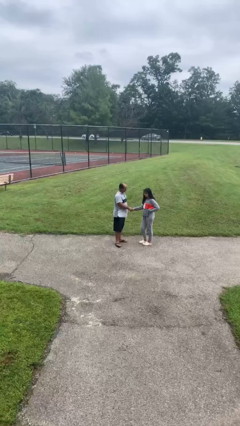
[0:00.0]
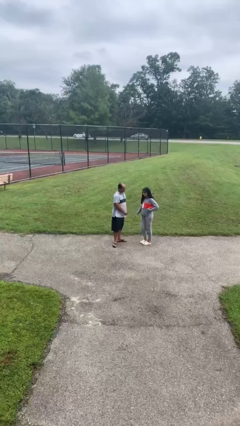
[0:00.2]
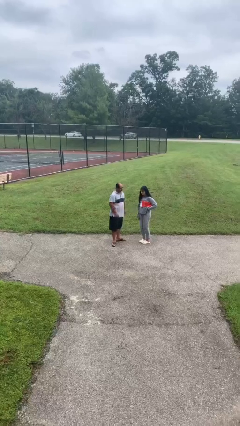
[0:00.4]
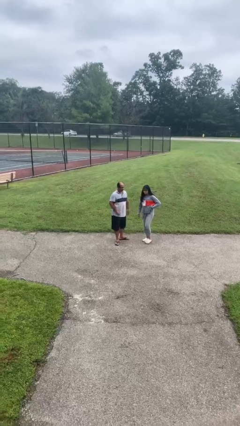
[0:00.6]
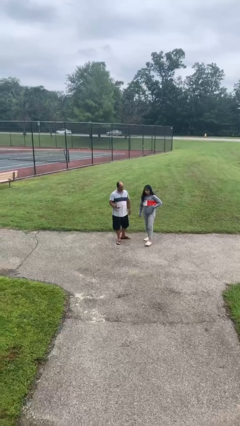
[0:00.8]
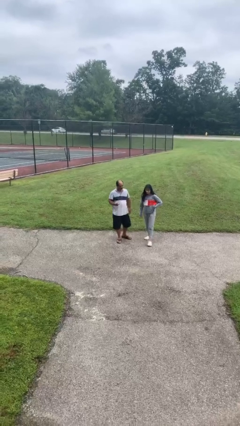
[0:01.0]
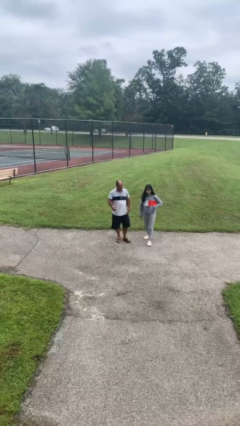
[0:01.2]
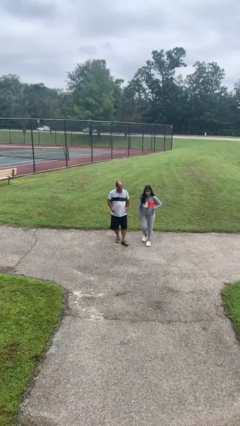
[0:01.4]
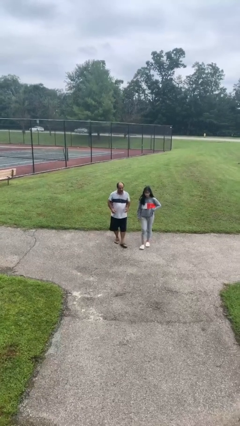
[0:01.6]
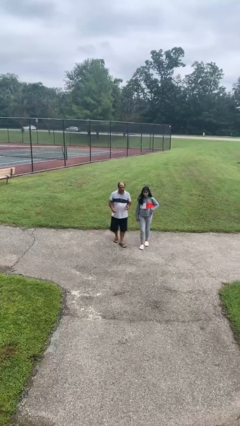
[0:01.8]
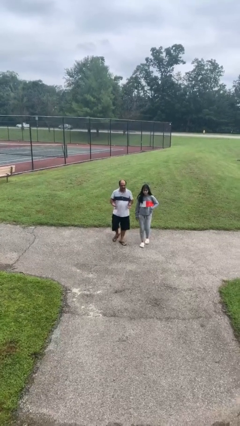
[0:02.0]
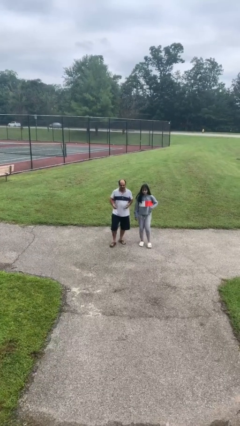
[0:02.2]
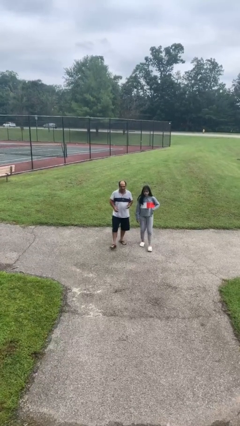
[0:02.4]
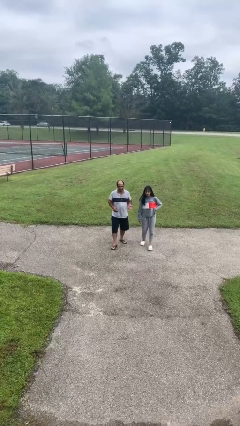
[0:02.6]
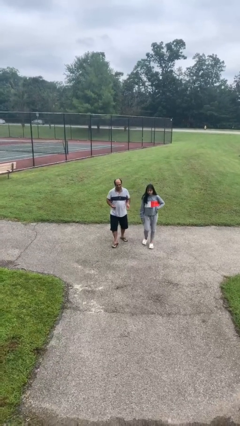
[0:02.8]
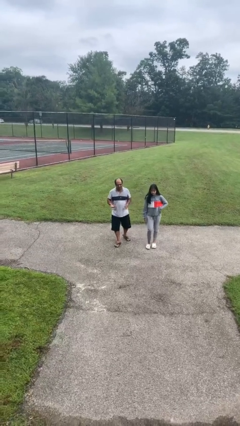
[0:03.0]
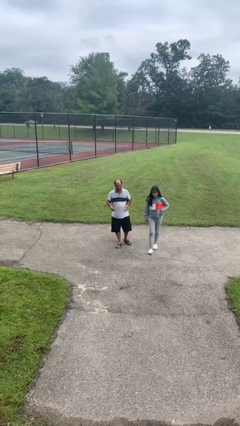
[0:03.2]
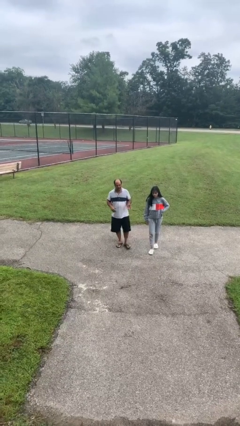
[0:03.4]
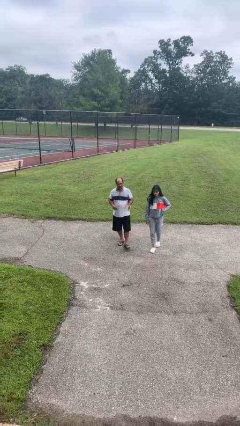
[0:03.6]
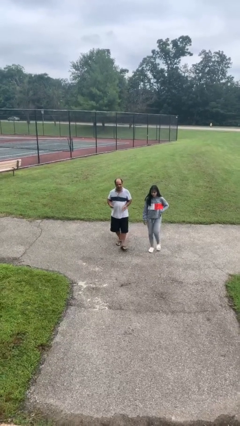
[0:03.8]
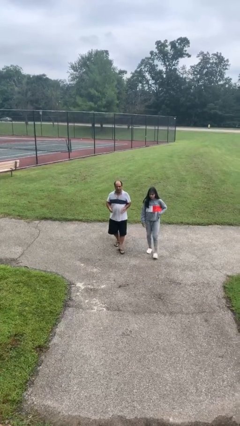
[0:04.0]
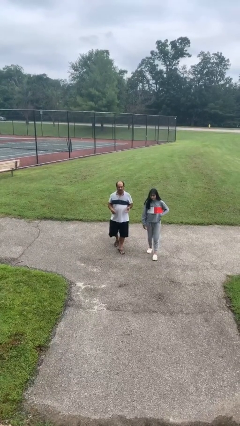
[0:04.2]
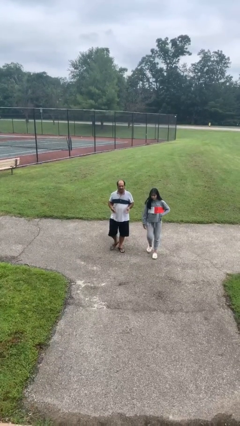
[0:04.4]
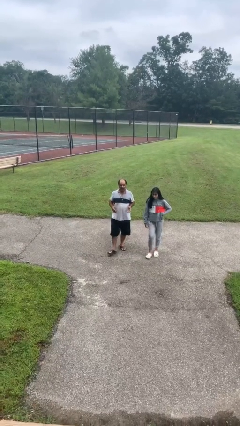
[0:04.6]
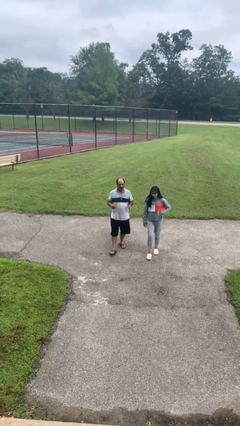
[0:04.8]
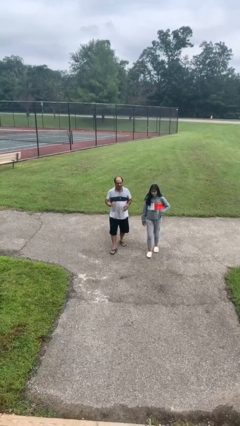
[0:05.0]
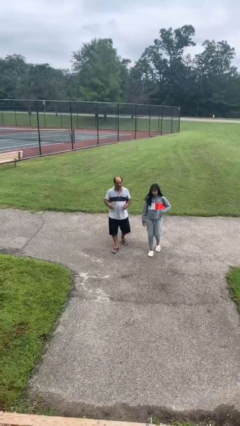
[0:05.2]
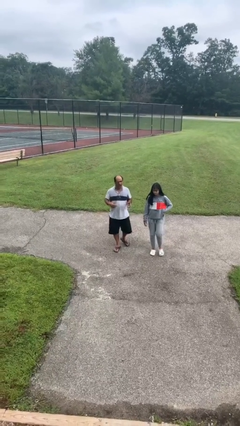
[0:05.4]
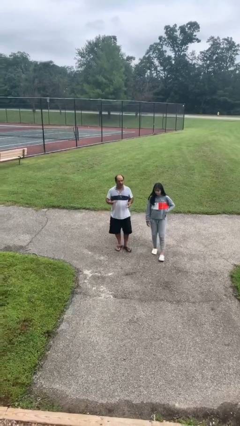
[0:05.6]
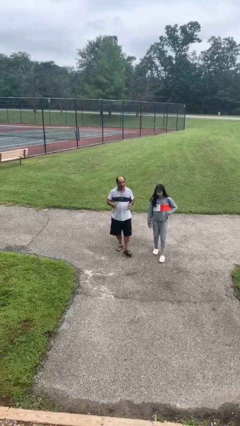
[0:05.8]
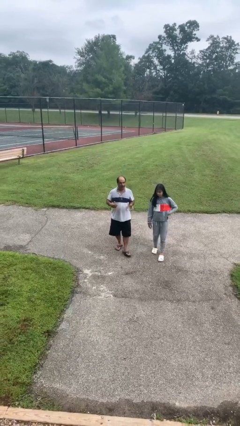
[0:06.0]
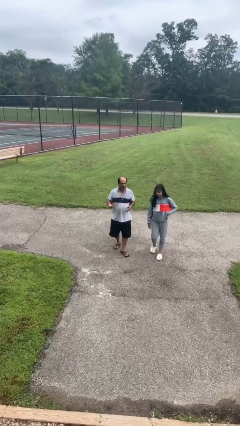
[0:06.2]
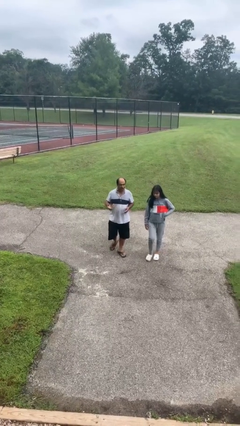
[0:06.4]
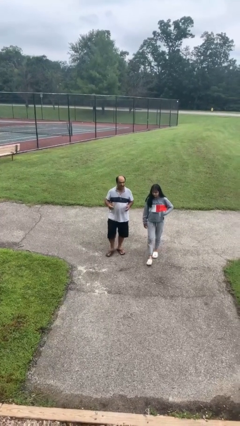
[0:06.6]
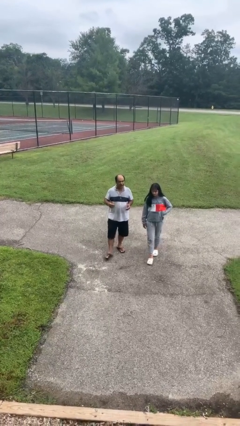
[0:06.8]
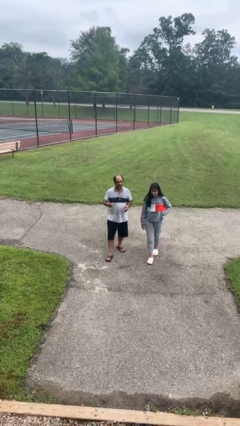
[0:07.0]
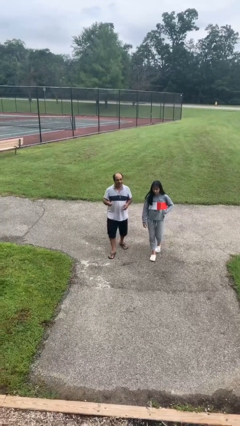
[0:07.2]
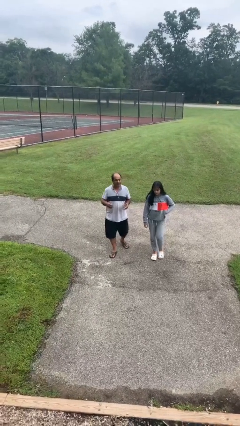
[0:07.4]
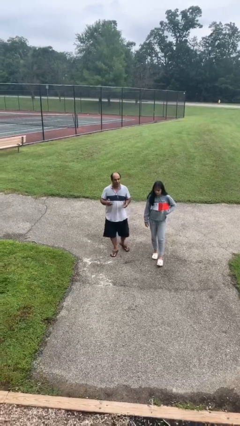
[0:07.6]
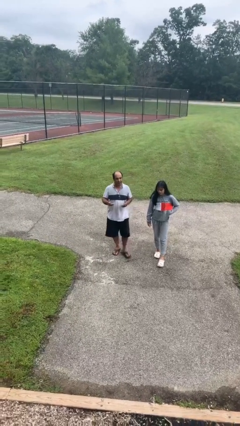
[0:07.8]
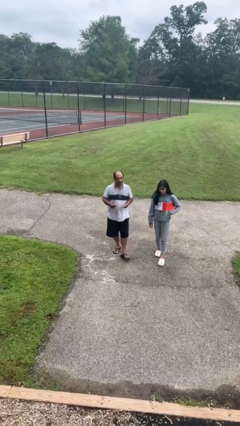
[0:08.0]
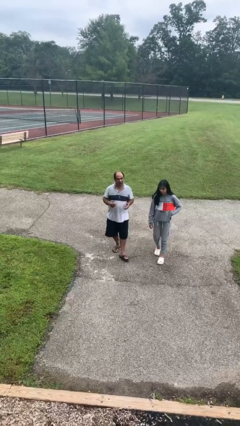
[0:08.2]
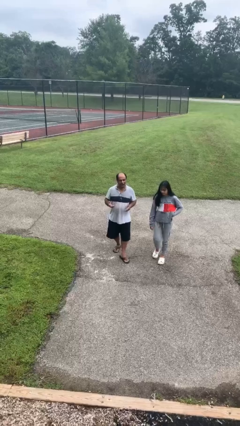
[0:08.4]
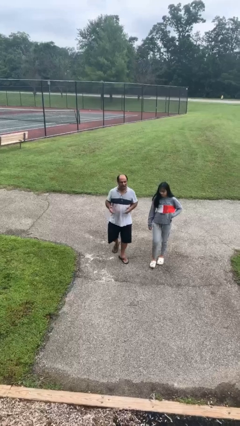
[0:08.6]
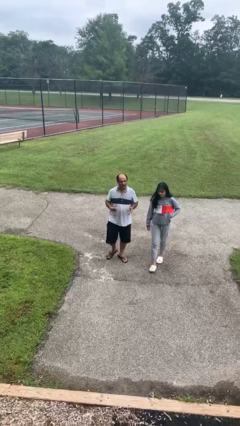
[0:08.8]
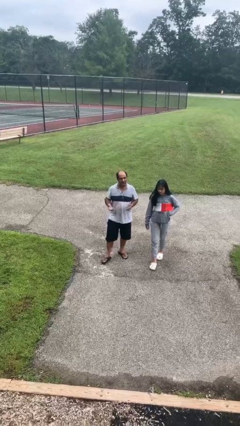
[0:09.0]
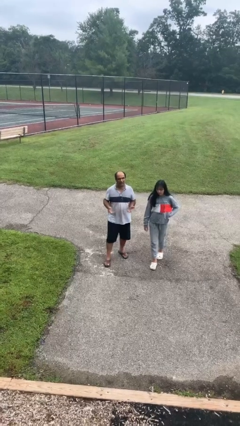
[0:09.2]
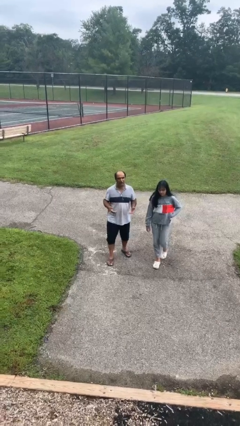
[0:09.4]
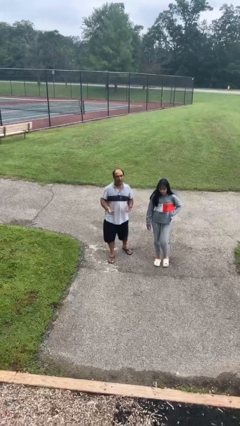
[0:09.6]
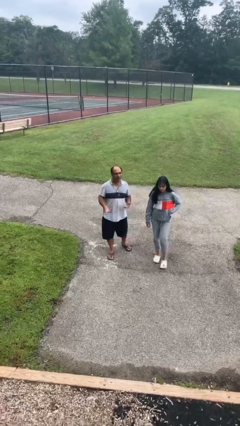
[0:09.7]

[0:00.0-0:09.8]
person talks to person

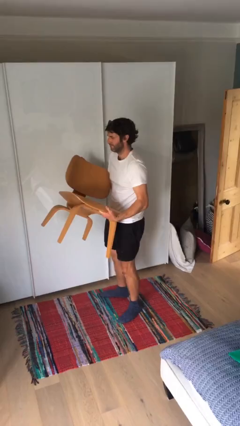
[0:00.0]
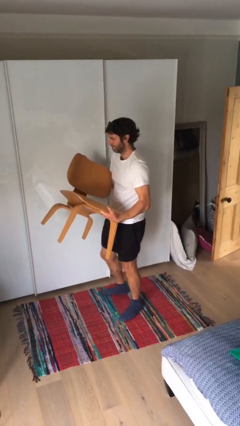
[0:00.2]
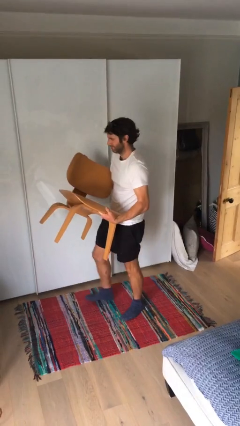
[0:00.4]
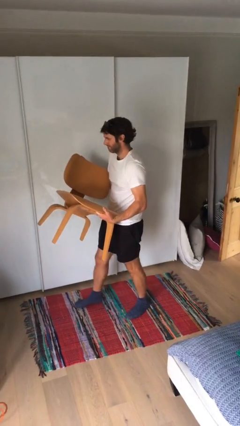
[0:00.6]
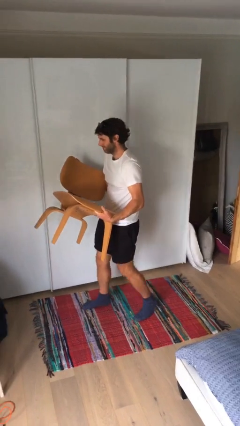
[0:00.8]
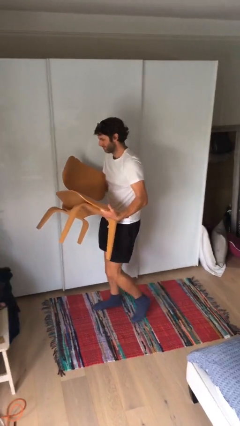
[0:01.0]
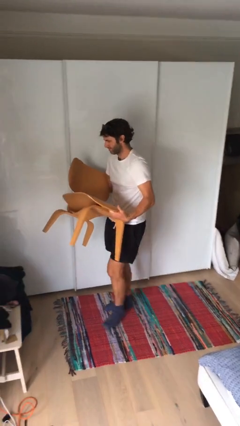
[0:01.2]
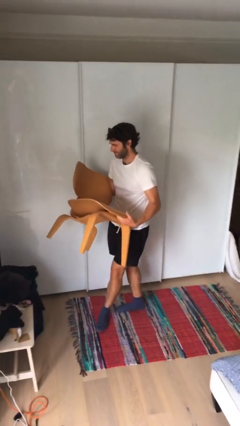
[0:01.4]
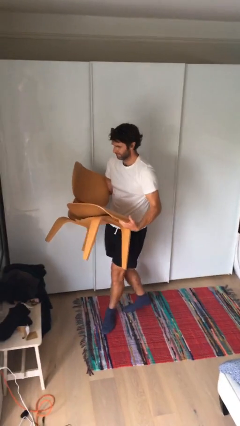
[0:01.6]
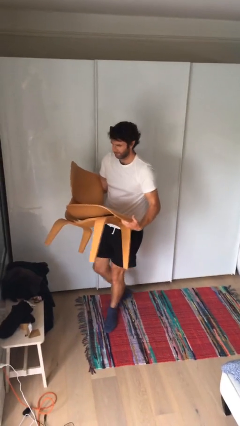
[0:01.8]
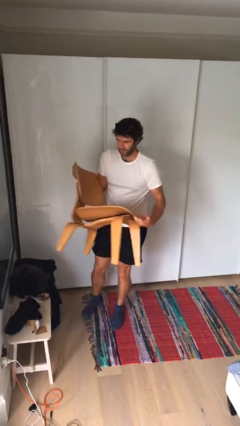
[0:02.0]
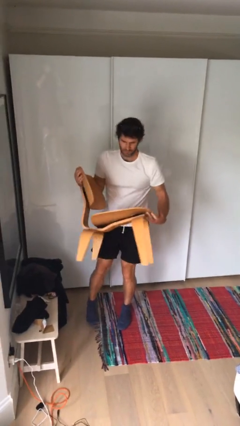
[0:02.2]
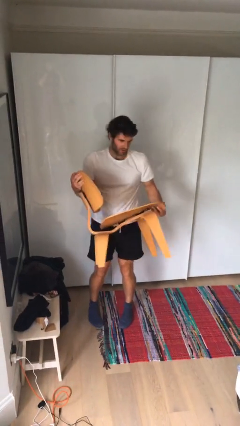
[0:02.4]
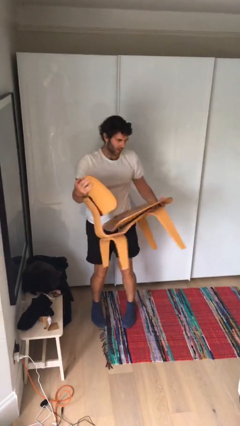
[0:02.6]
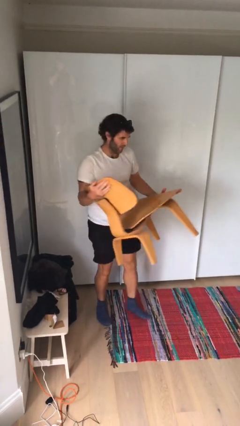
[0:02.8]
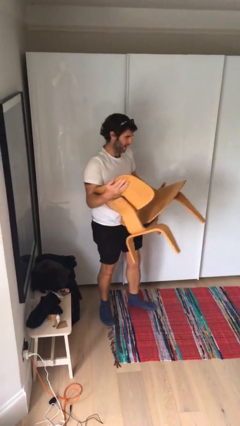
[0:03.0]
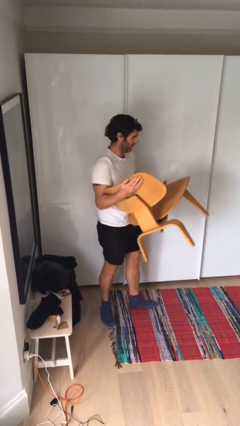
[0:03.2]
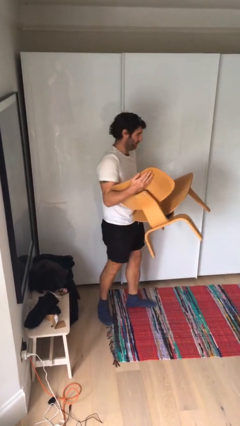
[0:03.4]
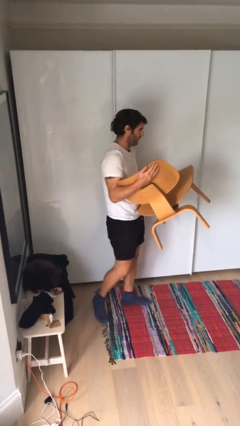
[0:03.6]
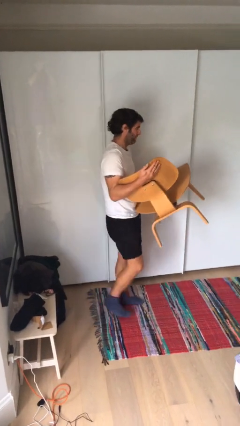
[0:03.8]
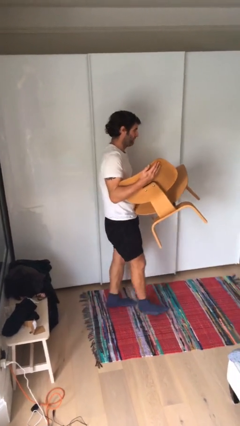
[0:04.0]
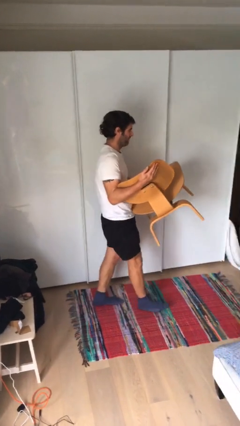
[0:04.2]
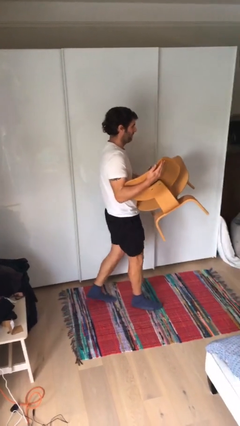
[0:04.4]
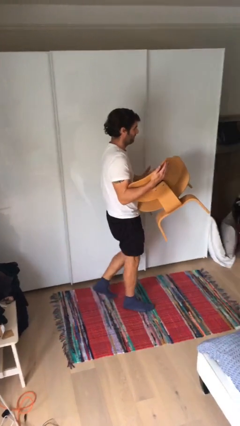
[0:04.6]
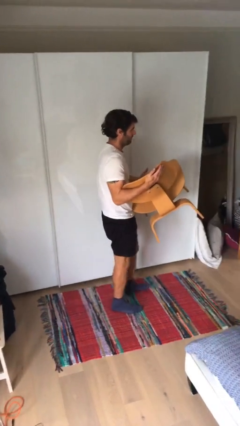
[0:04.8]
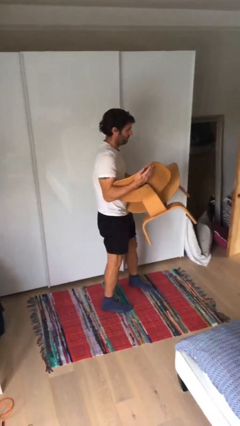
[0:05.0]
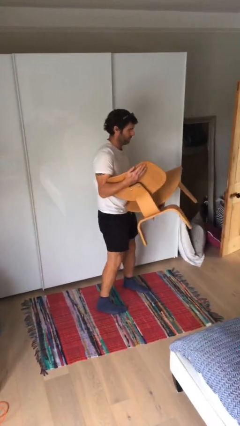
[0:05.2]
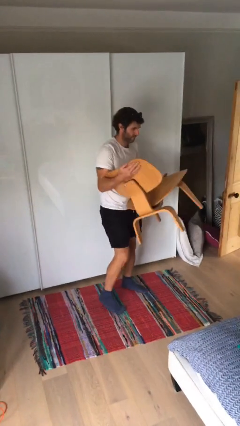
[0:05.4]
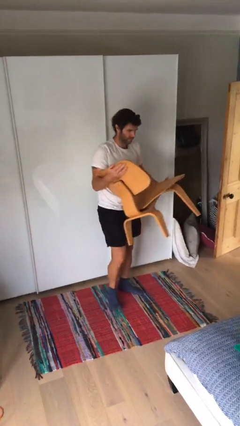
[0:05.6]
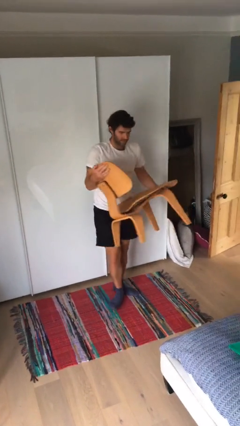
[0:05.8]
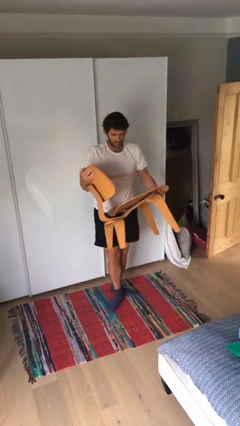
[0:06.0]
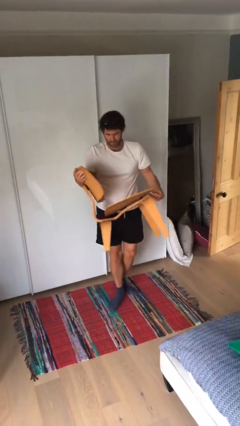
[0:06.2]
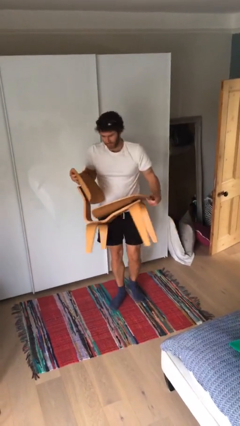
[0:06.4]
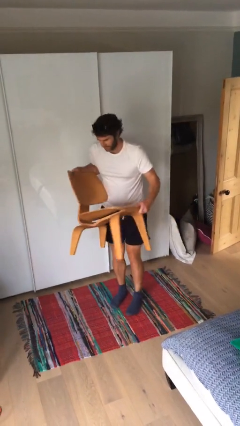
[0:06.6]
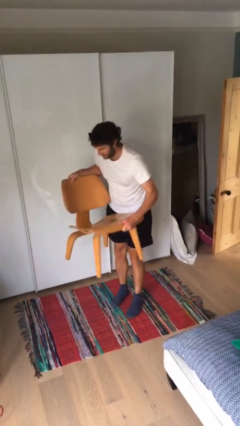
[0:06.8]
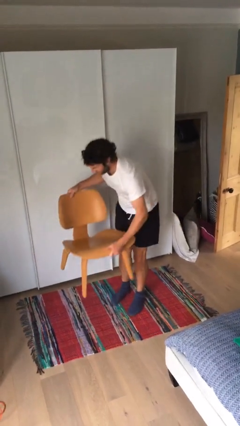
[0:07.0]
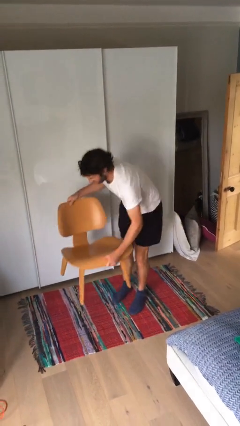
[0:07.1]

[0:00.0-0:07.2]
person carries heavy object

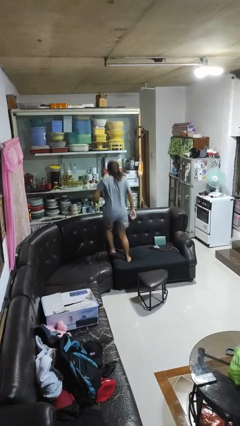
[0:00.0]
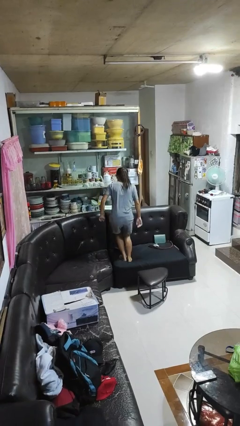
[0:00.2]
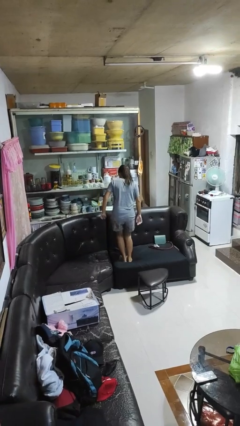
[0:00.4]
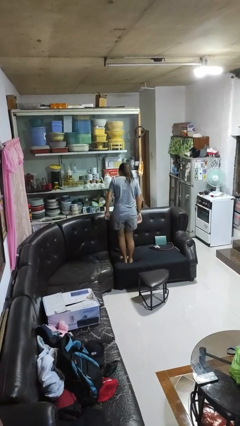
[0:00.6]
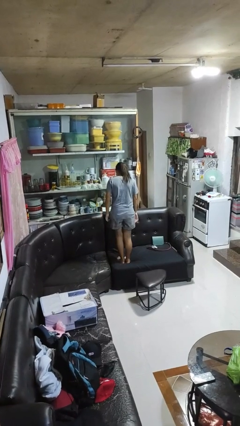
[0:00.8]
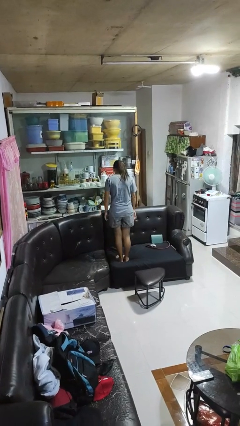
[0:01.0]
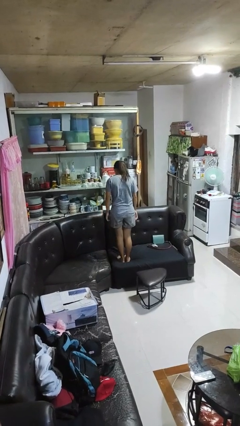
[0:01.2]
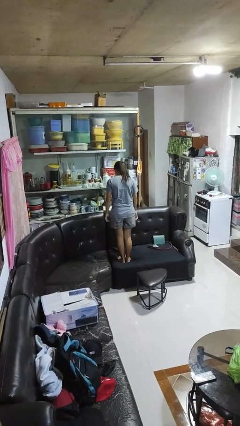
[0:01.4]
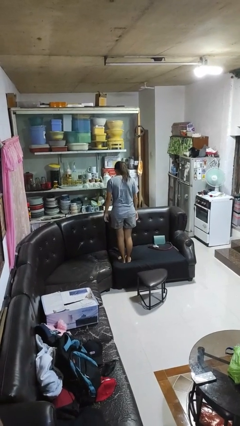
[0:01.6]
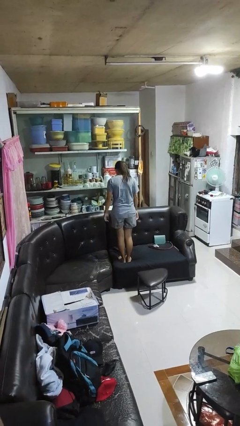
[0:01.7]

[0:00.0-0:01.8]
person jumps on couch
